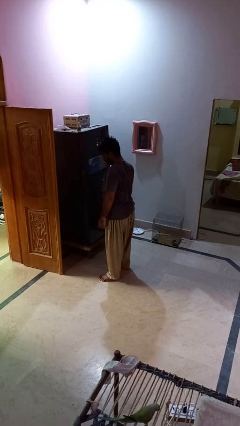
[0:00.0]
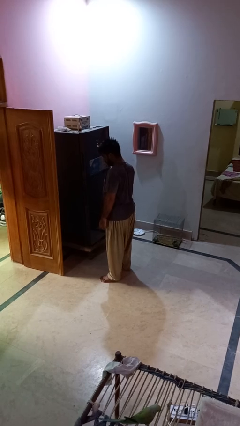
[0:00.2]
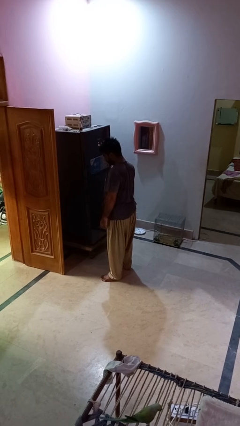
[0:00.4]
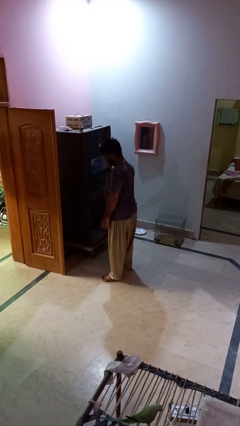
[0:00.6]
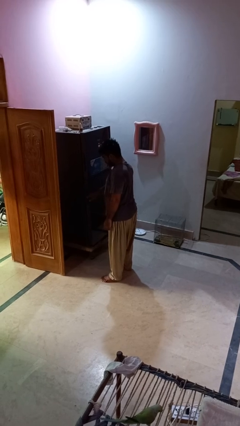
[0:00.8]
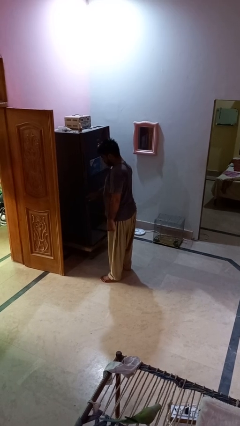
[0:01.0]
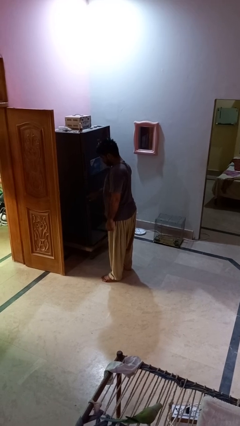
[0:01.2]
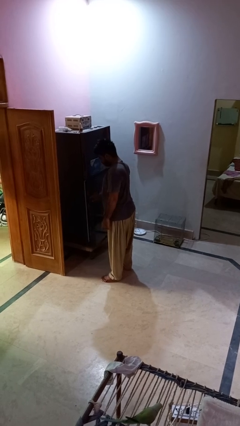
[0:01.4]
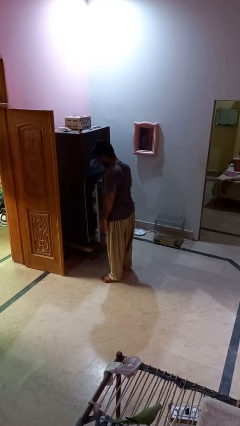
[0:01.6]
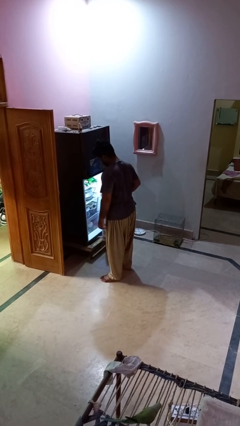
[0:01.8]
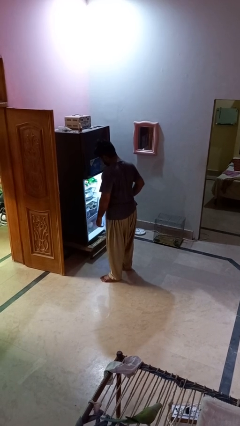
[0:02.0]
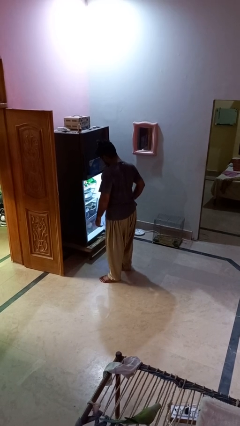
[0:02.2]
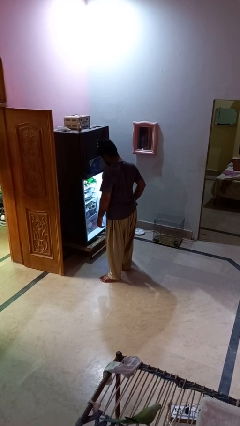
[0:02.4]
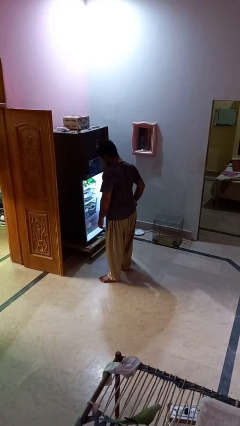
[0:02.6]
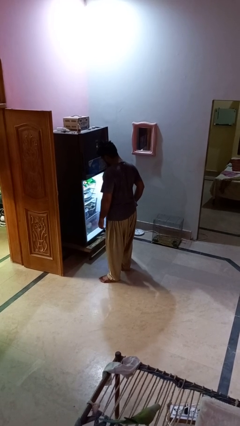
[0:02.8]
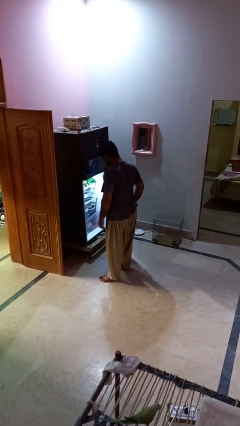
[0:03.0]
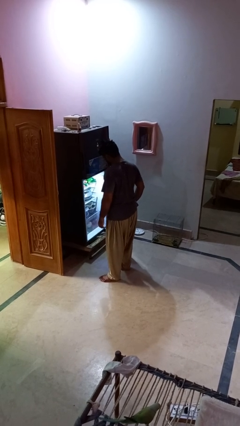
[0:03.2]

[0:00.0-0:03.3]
person opens refrigerator

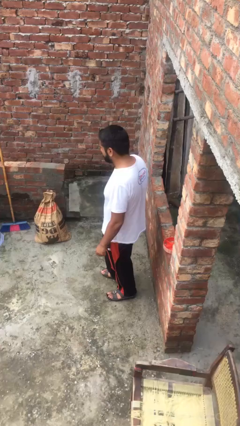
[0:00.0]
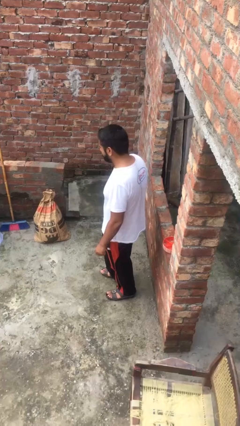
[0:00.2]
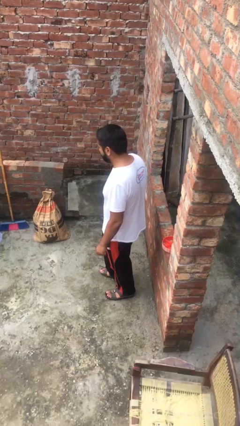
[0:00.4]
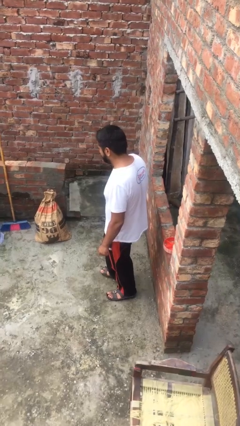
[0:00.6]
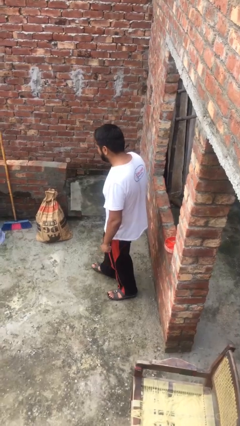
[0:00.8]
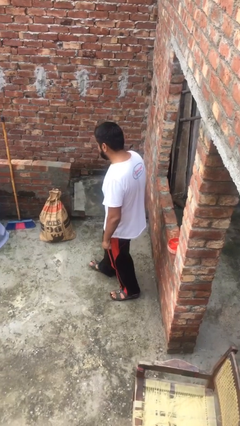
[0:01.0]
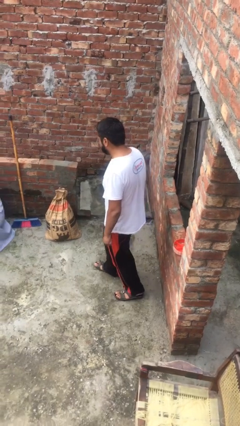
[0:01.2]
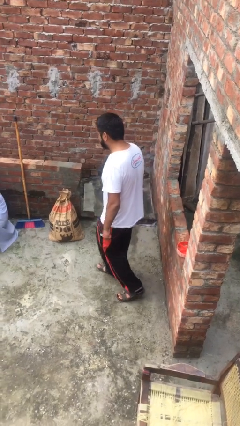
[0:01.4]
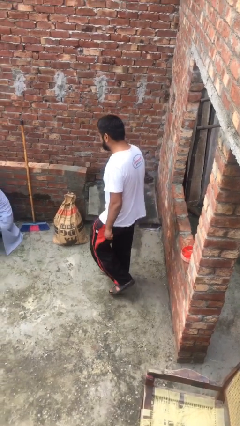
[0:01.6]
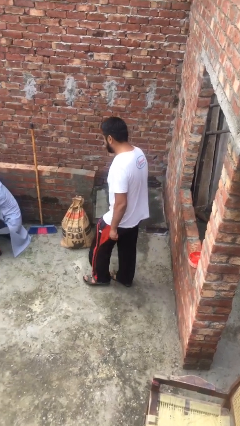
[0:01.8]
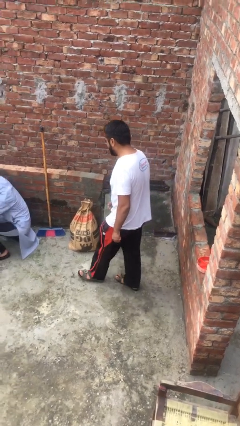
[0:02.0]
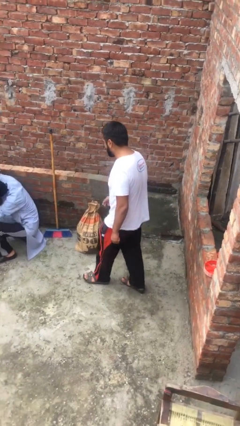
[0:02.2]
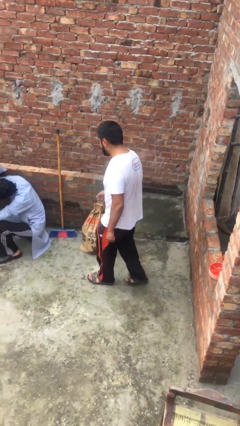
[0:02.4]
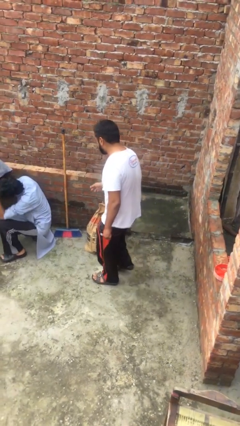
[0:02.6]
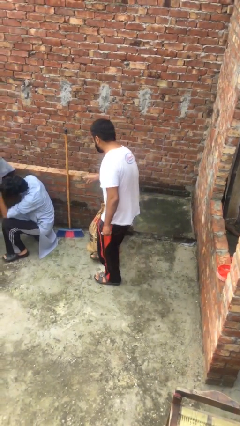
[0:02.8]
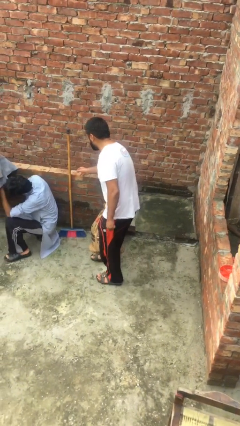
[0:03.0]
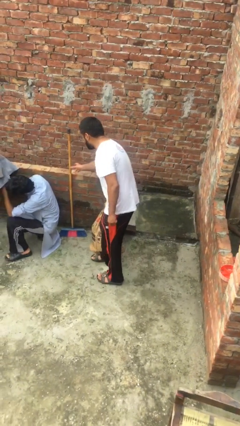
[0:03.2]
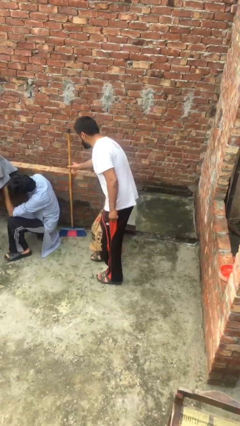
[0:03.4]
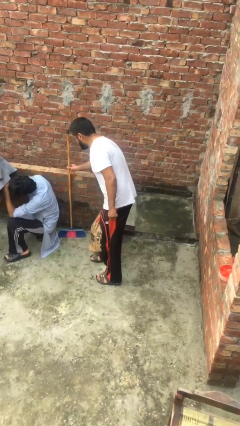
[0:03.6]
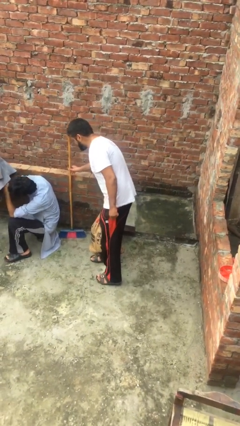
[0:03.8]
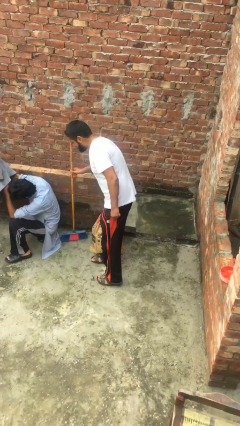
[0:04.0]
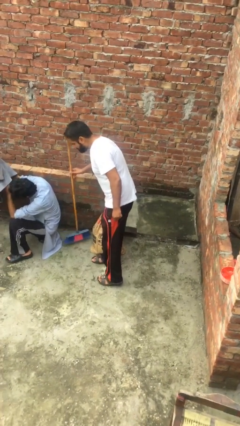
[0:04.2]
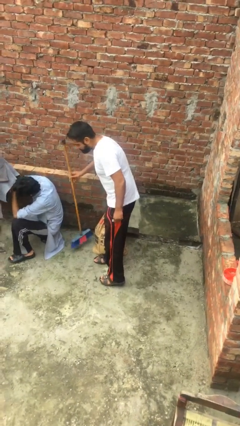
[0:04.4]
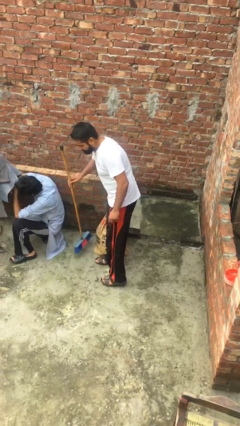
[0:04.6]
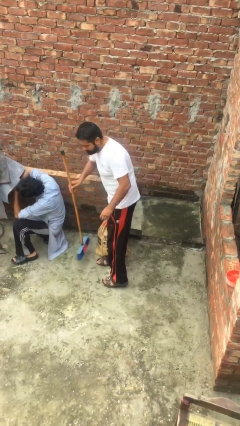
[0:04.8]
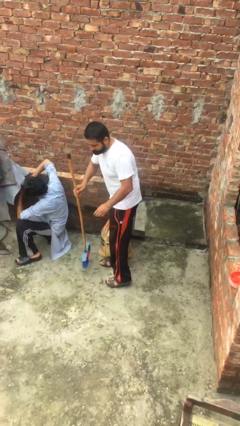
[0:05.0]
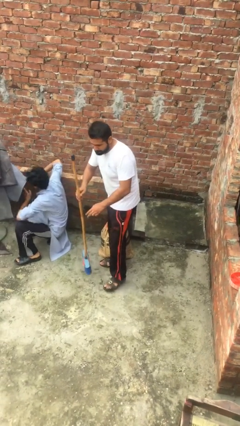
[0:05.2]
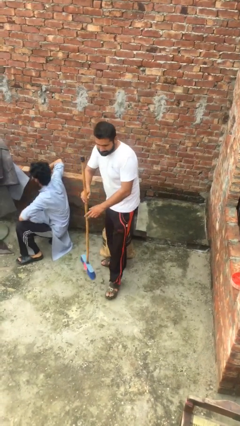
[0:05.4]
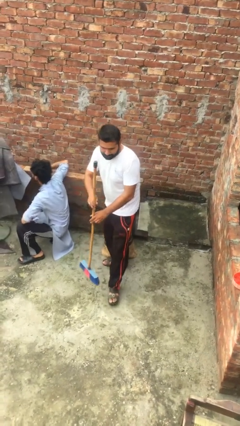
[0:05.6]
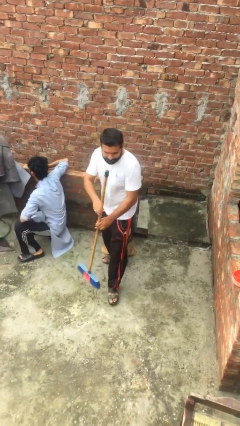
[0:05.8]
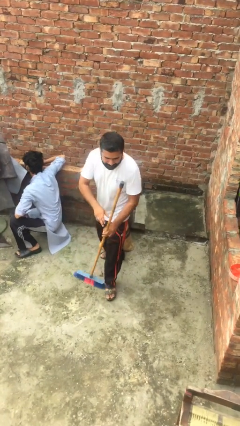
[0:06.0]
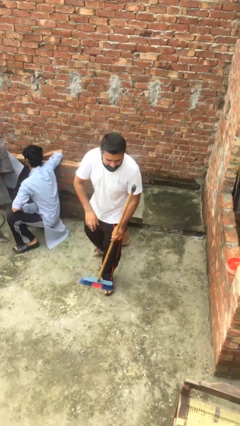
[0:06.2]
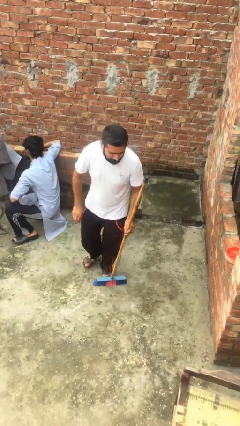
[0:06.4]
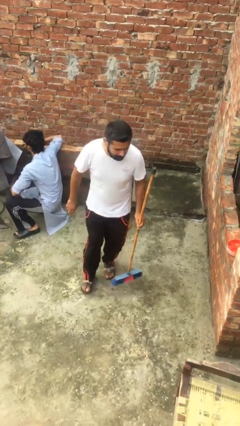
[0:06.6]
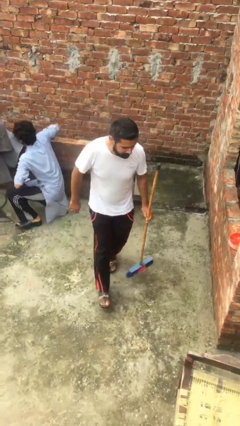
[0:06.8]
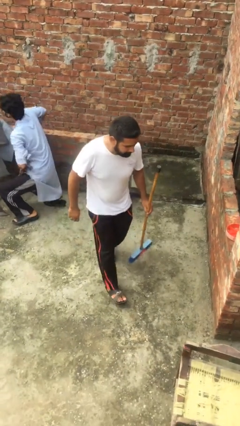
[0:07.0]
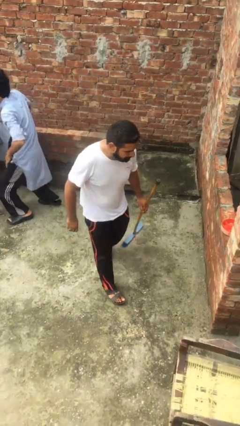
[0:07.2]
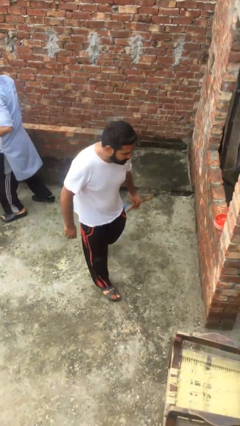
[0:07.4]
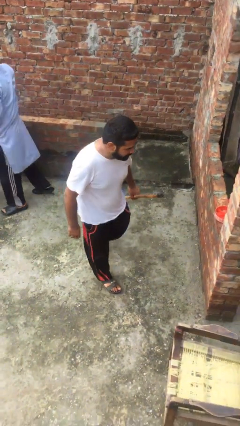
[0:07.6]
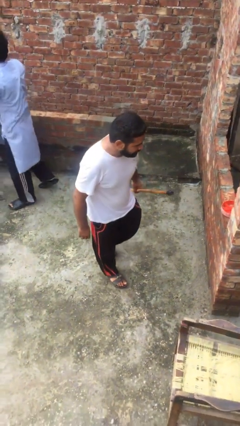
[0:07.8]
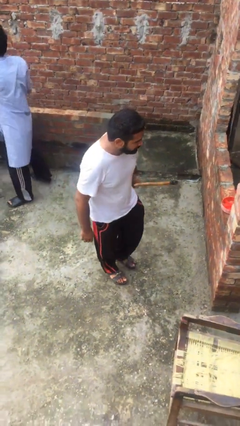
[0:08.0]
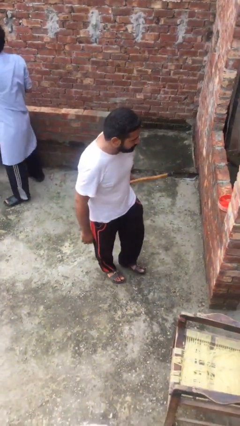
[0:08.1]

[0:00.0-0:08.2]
person steals object from person

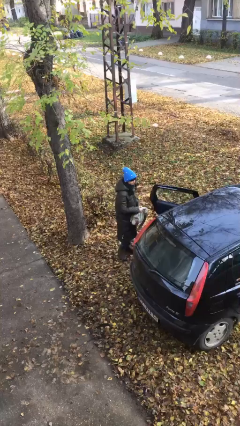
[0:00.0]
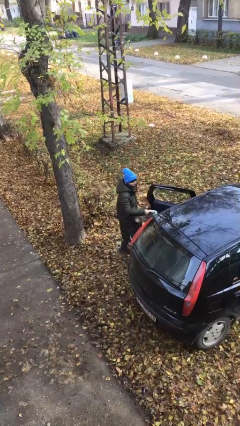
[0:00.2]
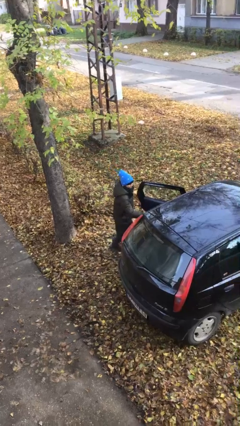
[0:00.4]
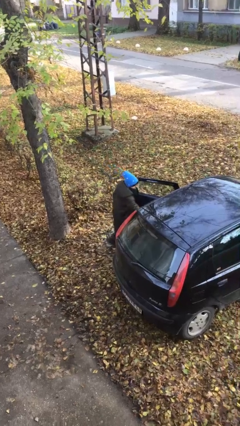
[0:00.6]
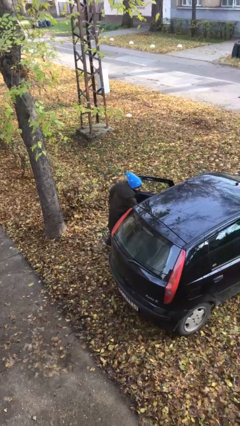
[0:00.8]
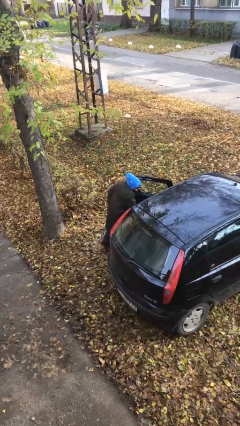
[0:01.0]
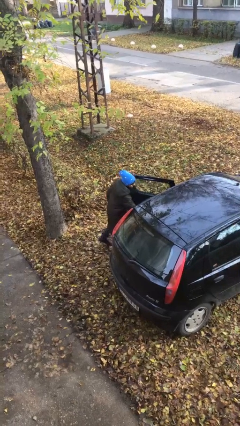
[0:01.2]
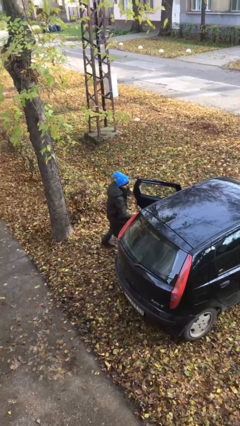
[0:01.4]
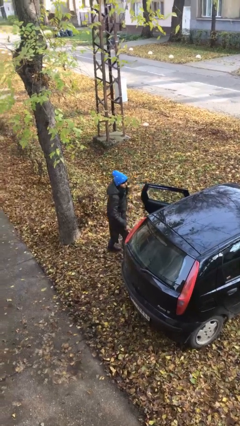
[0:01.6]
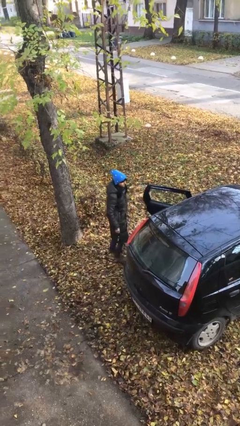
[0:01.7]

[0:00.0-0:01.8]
person loads car

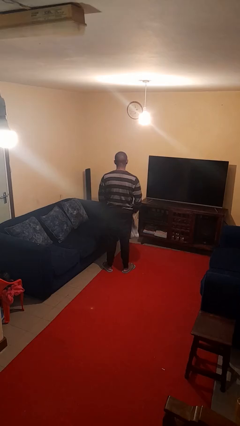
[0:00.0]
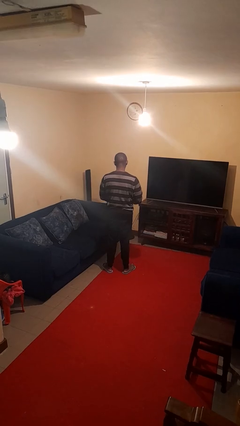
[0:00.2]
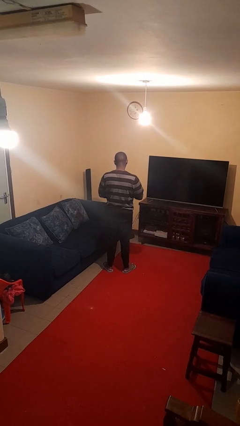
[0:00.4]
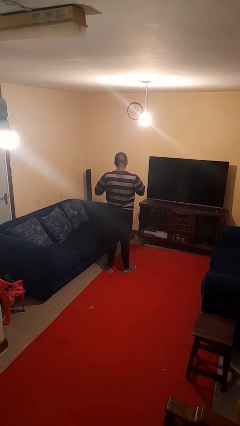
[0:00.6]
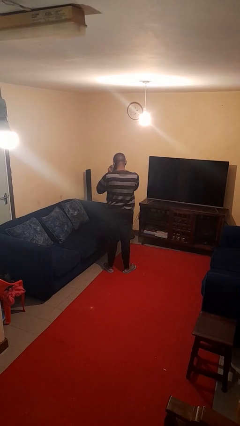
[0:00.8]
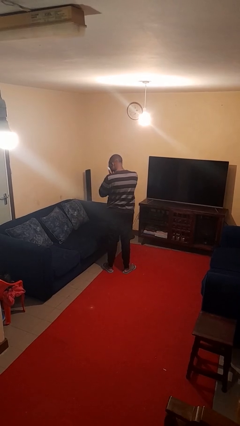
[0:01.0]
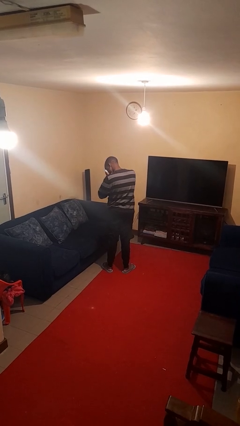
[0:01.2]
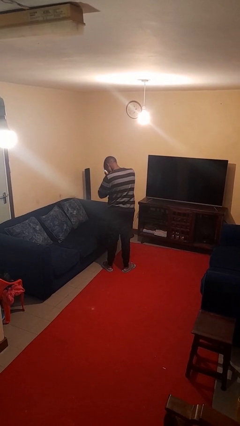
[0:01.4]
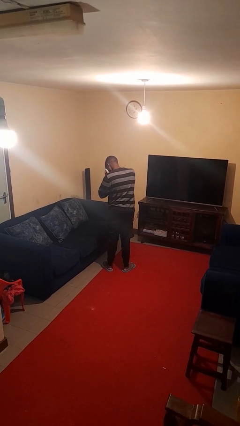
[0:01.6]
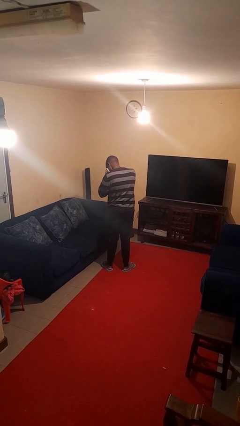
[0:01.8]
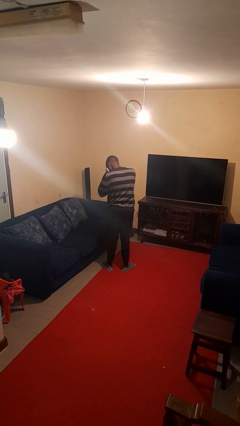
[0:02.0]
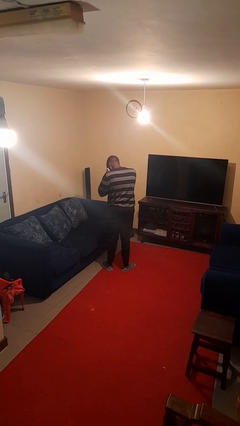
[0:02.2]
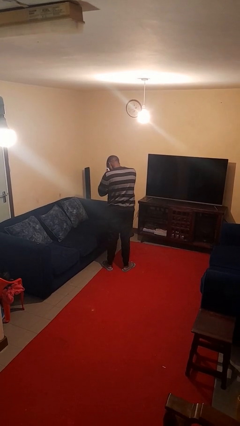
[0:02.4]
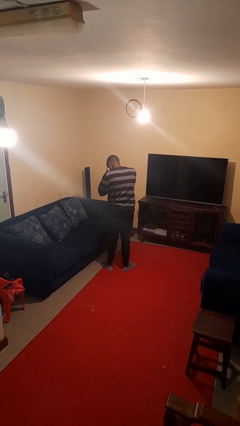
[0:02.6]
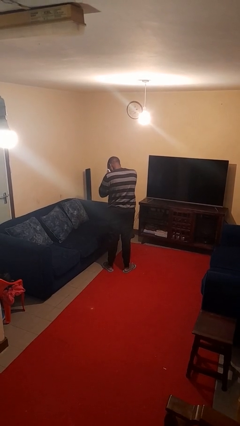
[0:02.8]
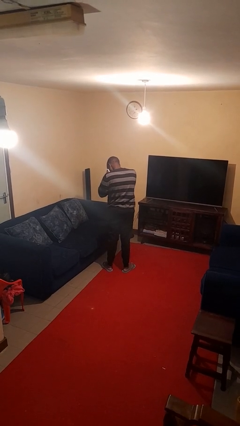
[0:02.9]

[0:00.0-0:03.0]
person blows nose

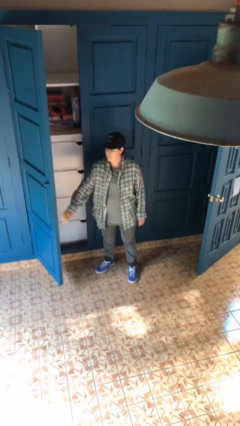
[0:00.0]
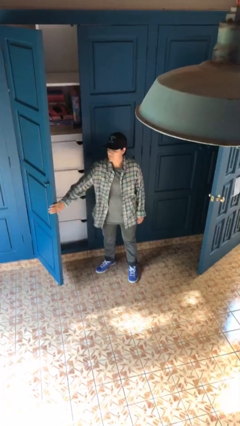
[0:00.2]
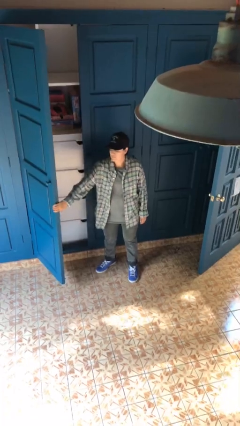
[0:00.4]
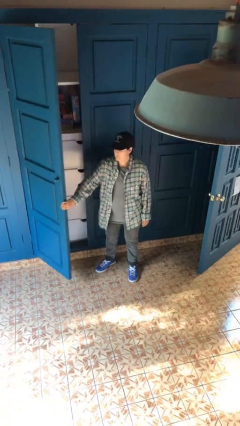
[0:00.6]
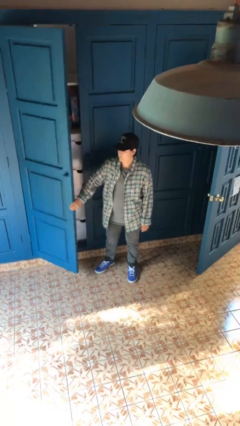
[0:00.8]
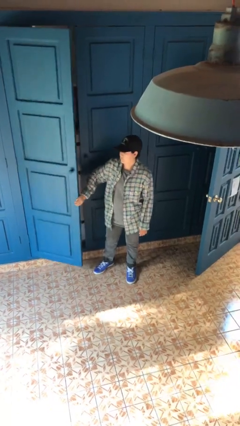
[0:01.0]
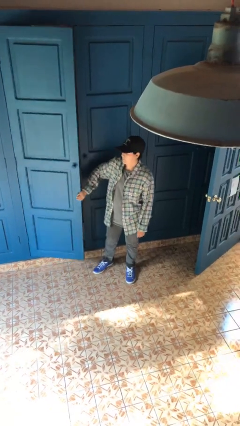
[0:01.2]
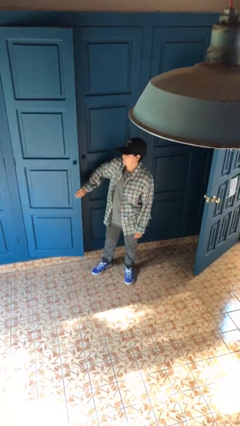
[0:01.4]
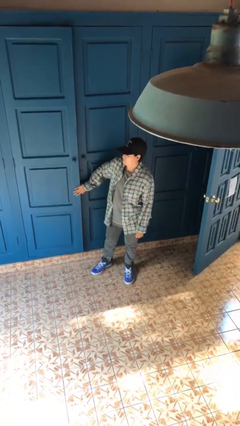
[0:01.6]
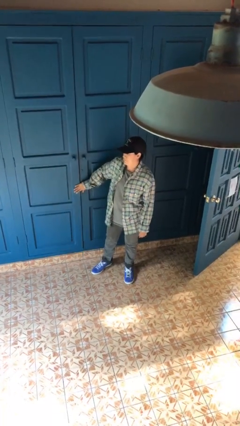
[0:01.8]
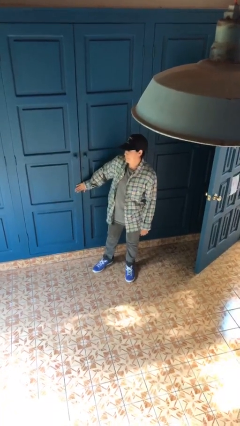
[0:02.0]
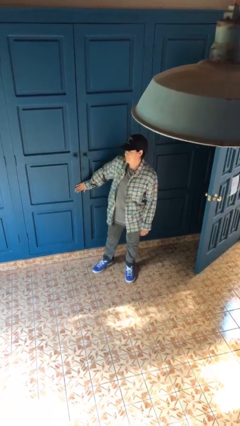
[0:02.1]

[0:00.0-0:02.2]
person closes closet door
